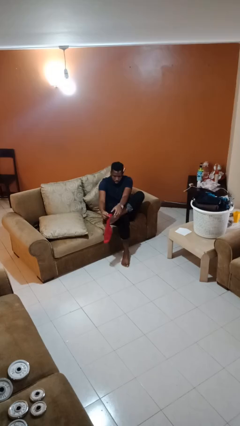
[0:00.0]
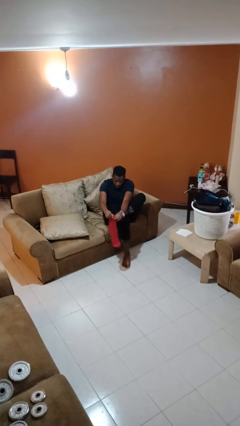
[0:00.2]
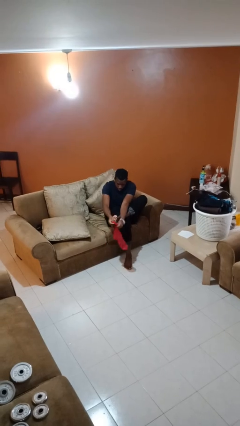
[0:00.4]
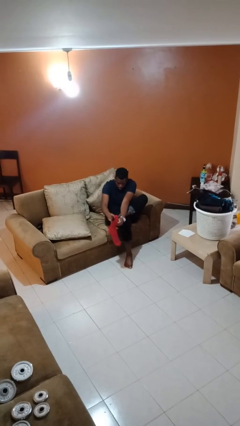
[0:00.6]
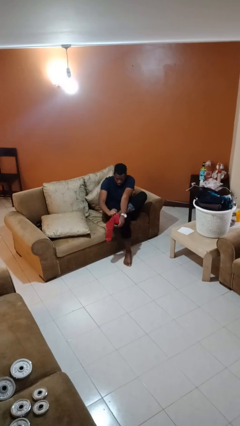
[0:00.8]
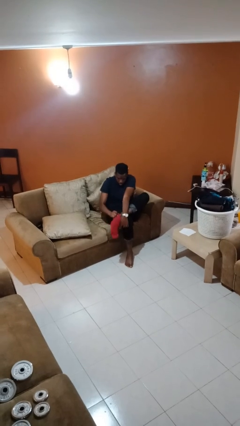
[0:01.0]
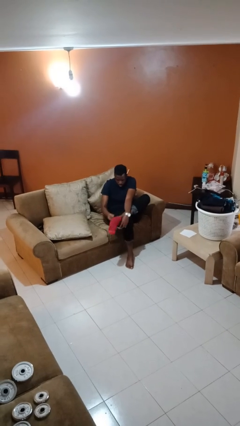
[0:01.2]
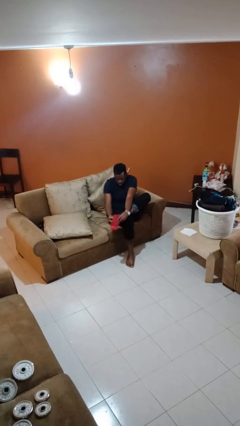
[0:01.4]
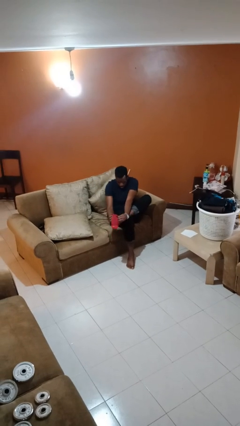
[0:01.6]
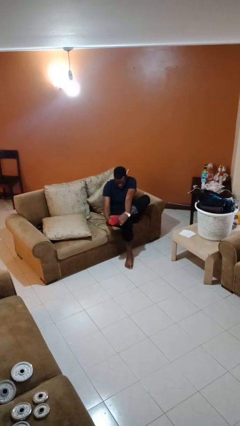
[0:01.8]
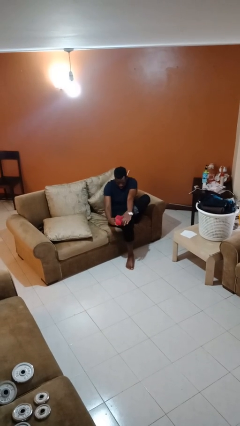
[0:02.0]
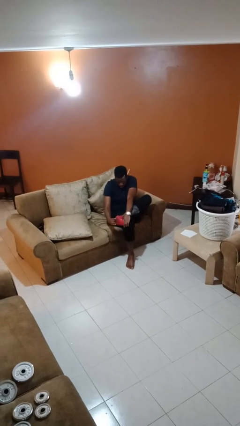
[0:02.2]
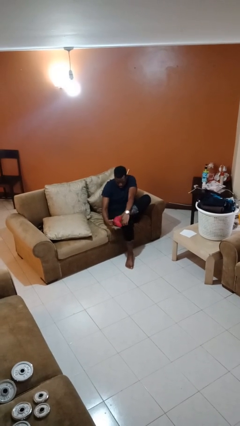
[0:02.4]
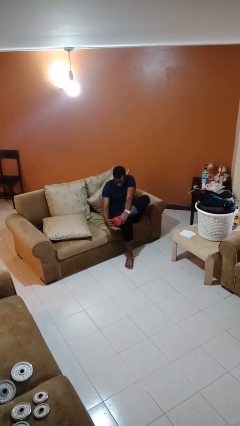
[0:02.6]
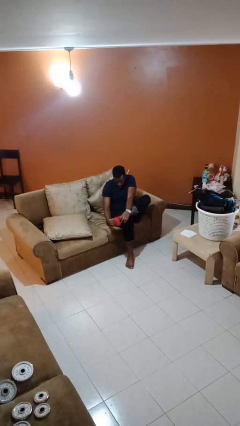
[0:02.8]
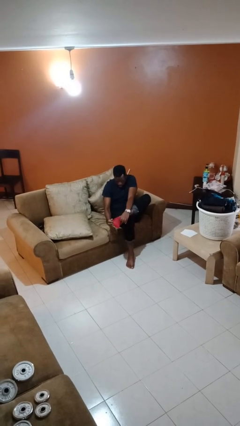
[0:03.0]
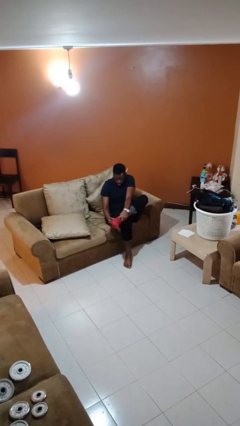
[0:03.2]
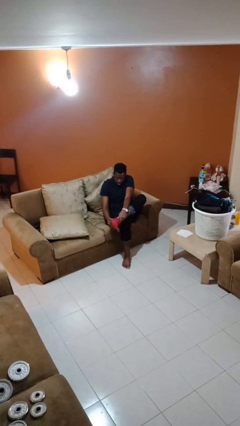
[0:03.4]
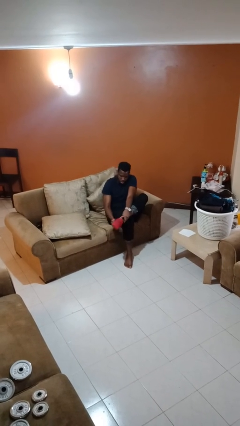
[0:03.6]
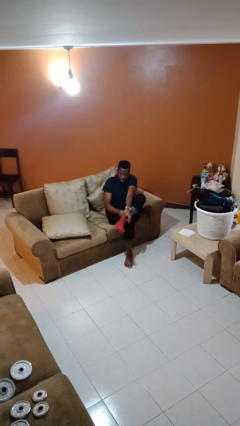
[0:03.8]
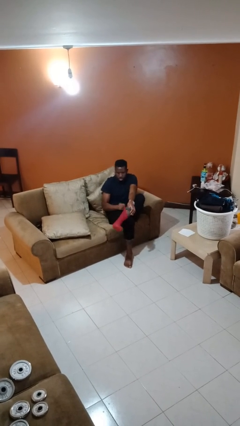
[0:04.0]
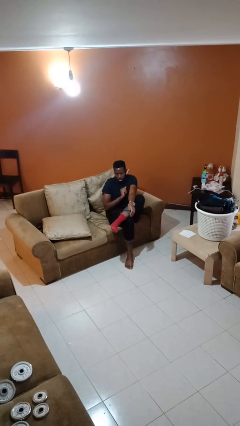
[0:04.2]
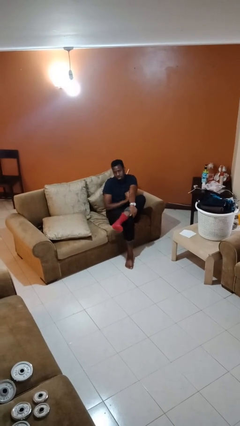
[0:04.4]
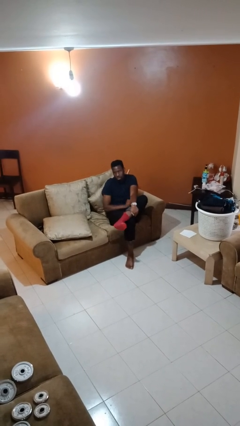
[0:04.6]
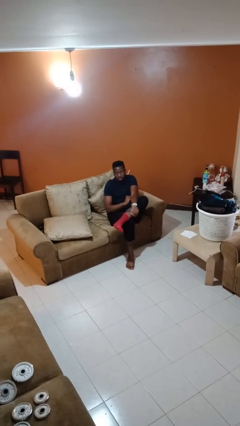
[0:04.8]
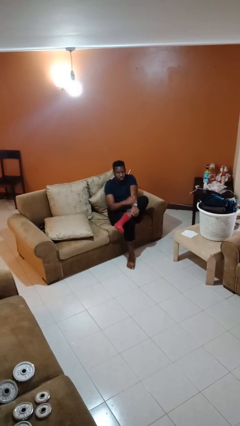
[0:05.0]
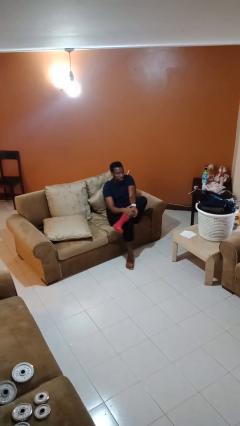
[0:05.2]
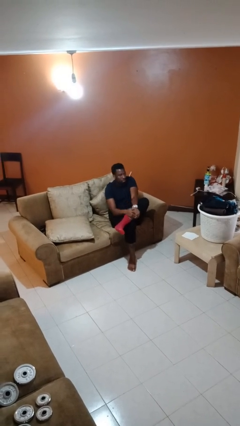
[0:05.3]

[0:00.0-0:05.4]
person puts on socks

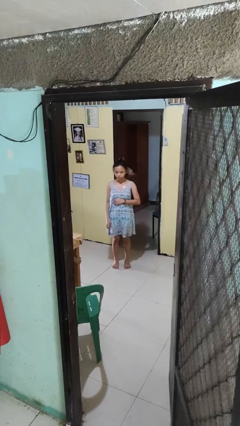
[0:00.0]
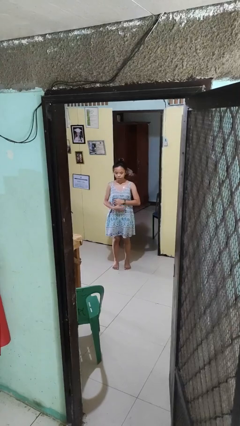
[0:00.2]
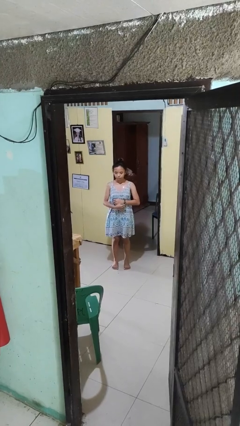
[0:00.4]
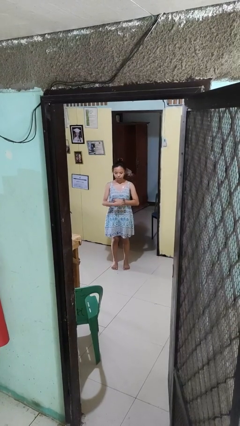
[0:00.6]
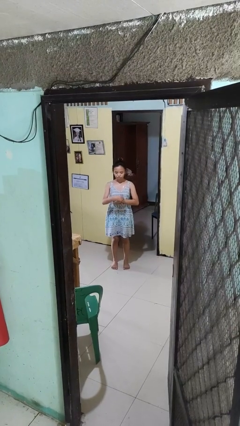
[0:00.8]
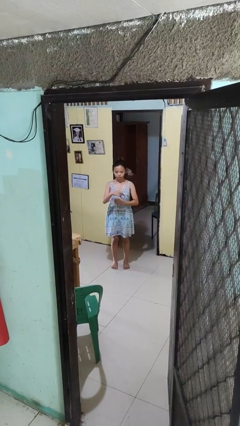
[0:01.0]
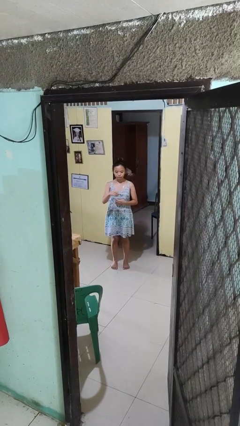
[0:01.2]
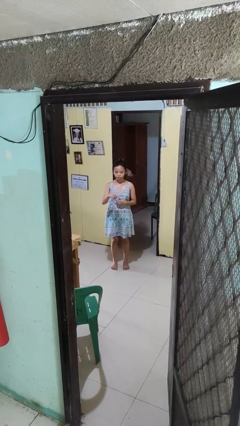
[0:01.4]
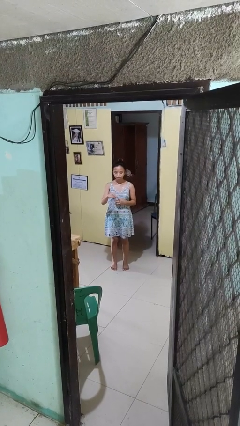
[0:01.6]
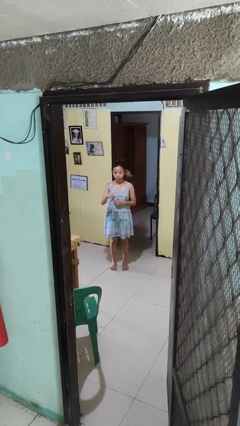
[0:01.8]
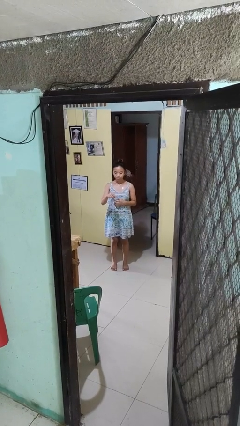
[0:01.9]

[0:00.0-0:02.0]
person takes off wristwatch

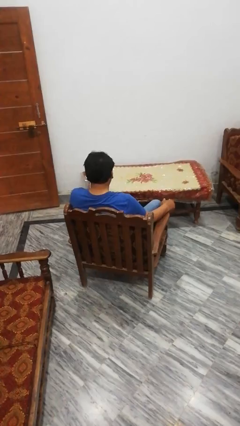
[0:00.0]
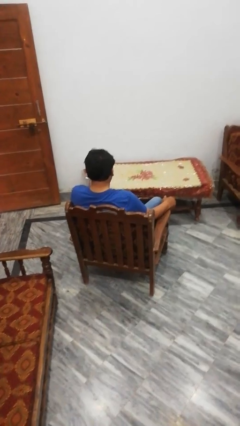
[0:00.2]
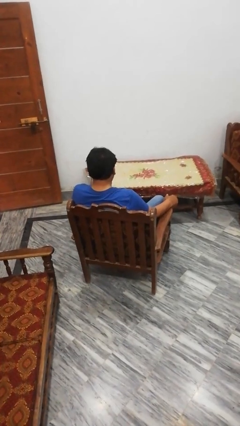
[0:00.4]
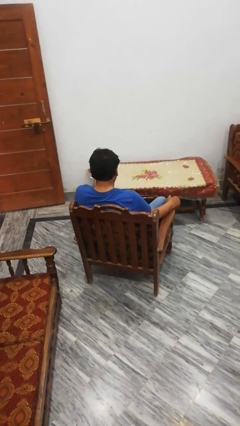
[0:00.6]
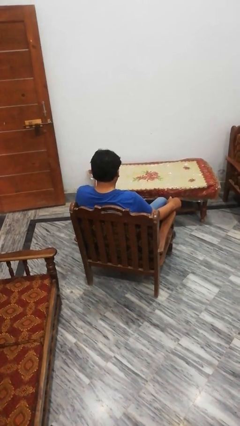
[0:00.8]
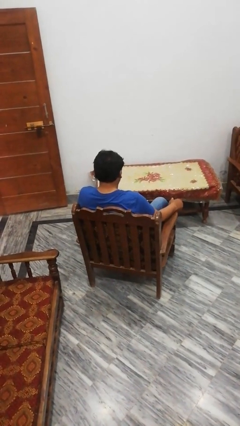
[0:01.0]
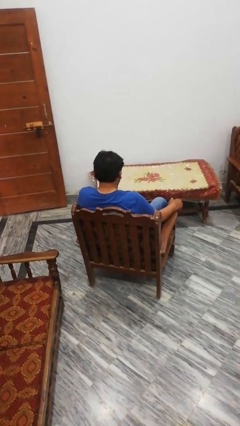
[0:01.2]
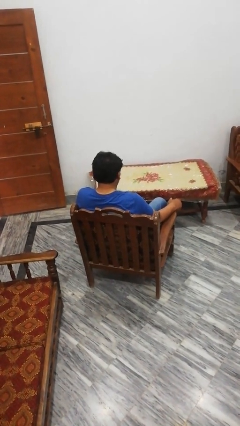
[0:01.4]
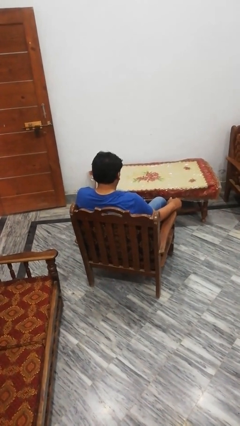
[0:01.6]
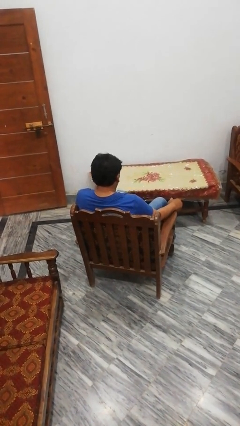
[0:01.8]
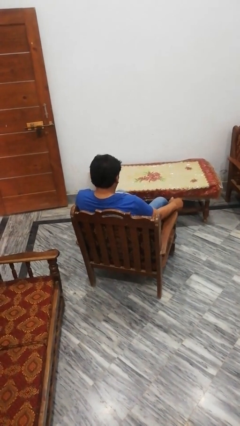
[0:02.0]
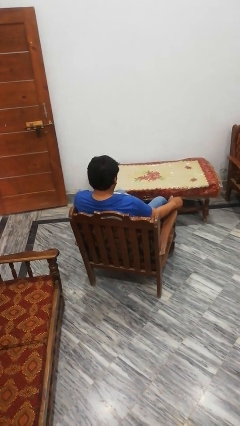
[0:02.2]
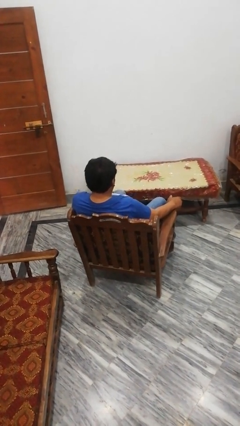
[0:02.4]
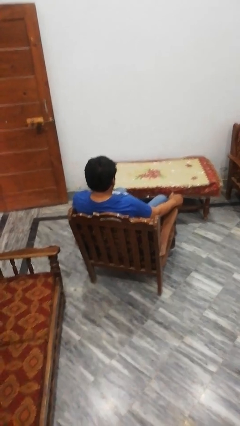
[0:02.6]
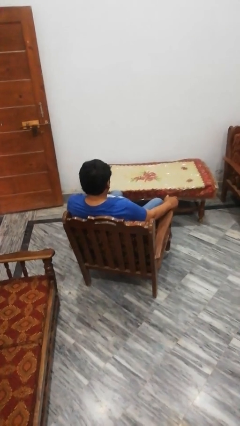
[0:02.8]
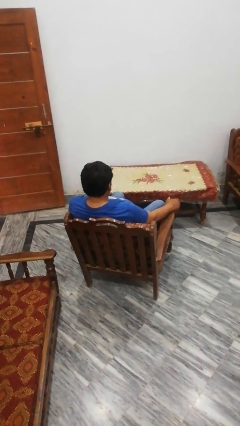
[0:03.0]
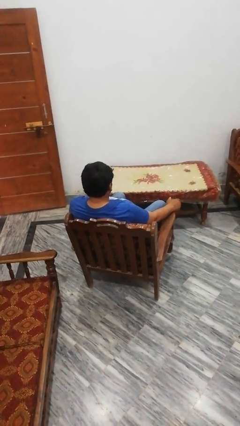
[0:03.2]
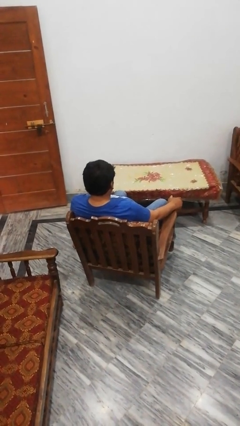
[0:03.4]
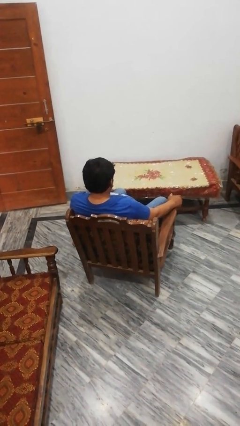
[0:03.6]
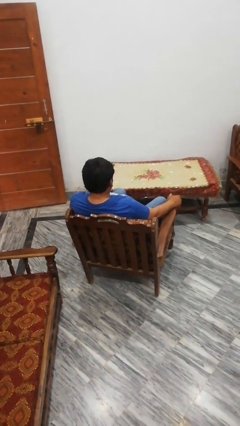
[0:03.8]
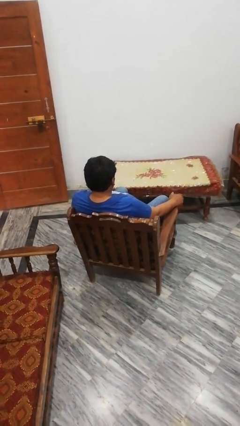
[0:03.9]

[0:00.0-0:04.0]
person pulls out chair

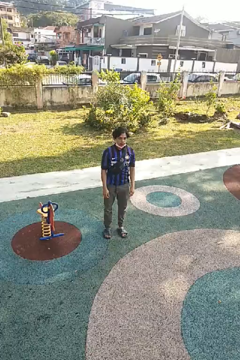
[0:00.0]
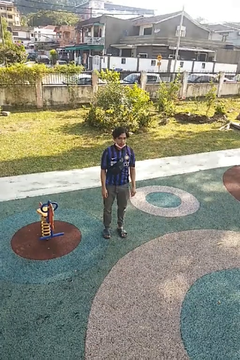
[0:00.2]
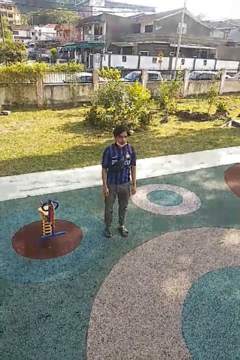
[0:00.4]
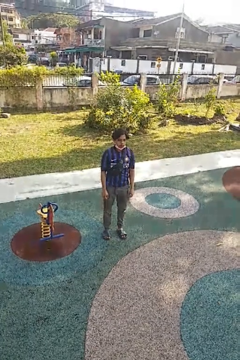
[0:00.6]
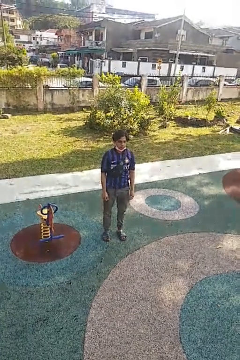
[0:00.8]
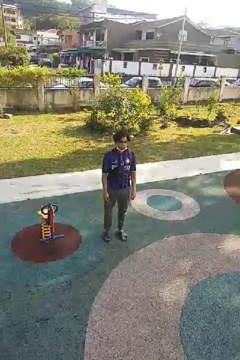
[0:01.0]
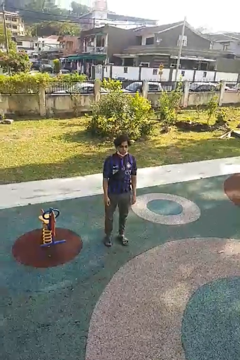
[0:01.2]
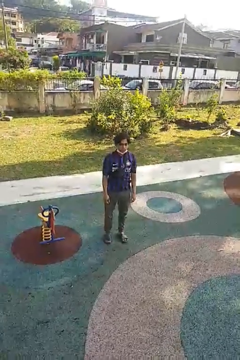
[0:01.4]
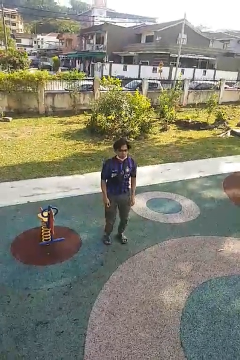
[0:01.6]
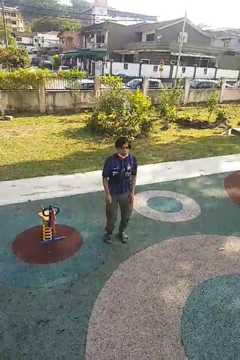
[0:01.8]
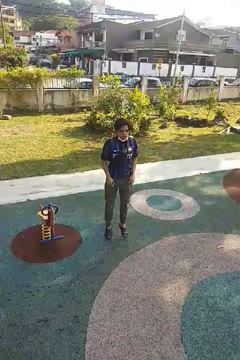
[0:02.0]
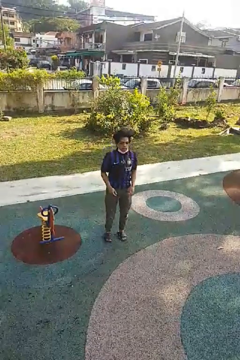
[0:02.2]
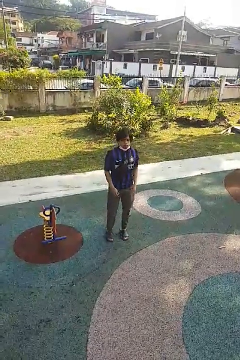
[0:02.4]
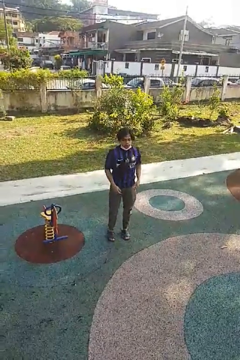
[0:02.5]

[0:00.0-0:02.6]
person jumps

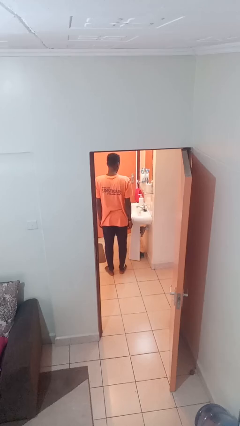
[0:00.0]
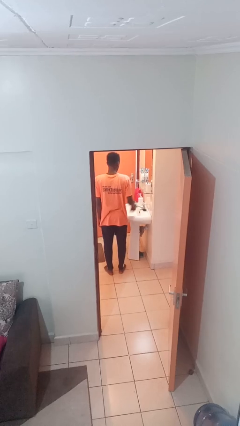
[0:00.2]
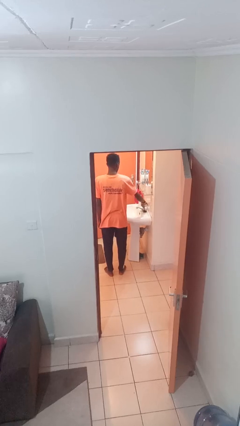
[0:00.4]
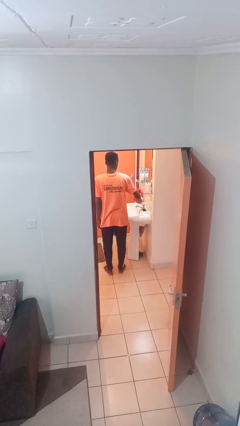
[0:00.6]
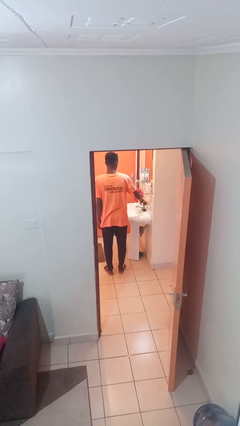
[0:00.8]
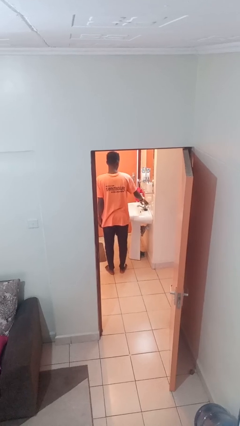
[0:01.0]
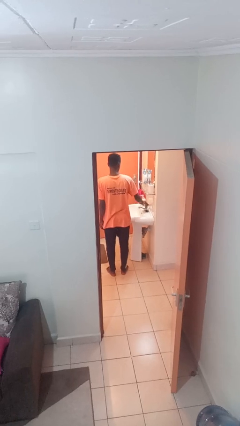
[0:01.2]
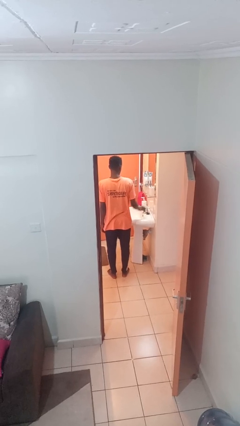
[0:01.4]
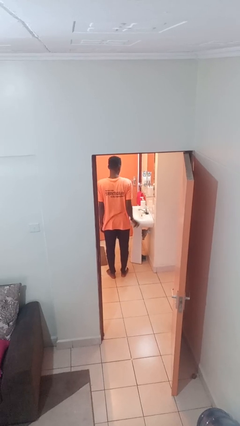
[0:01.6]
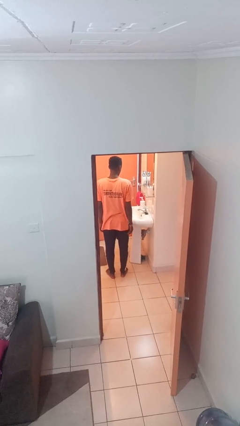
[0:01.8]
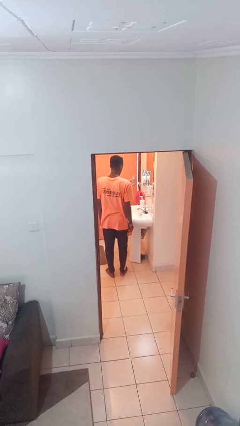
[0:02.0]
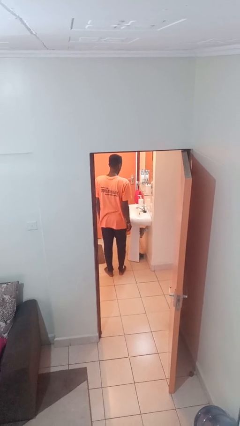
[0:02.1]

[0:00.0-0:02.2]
person turns off faucet

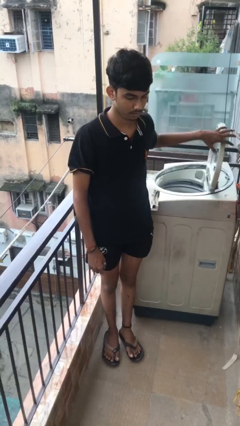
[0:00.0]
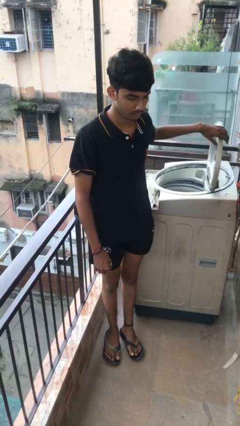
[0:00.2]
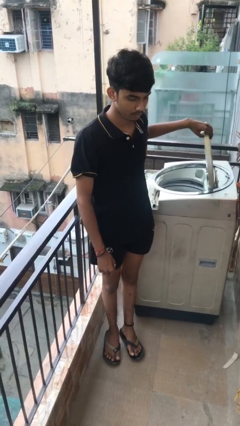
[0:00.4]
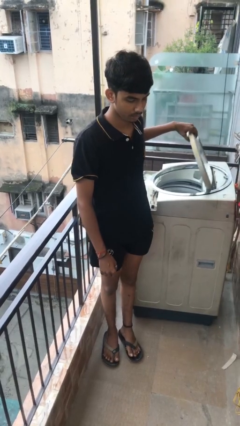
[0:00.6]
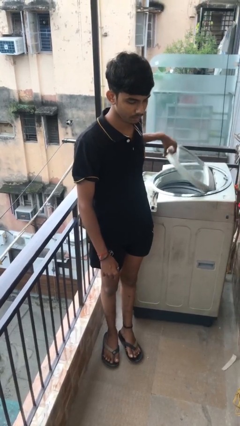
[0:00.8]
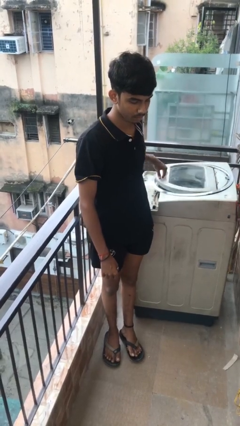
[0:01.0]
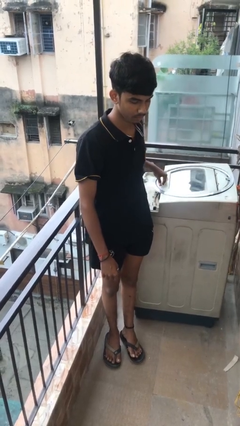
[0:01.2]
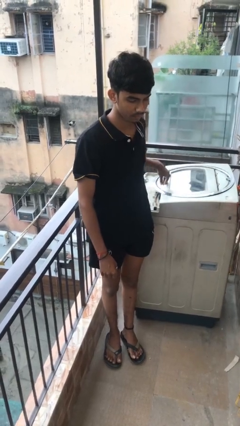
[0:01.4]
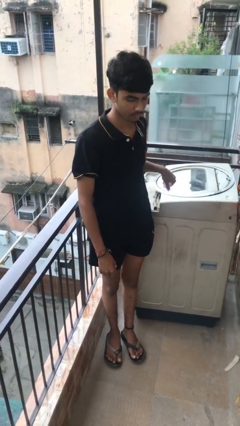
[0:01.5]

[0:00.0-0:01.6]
person closes clothes washer
